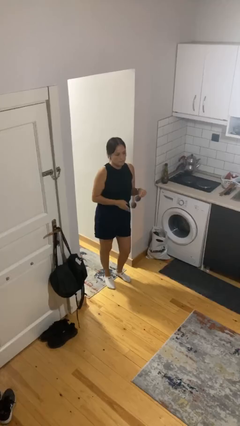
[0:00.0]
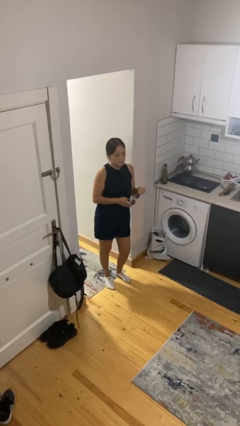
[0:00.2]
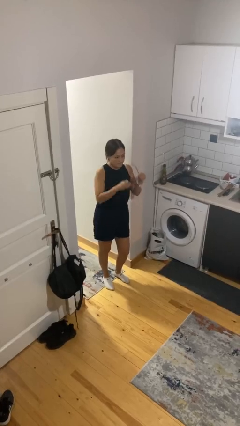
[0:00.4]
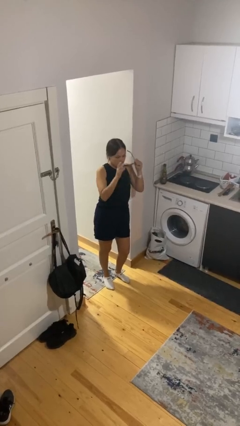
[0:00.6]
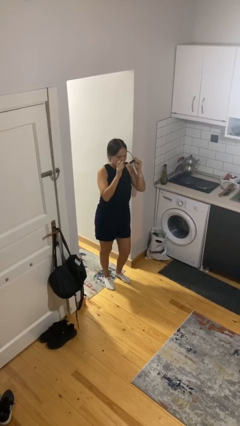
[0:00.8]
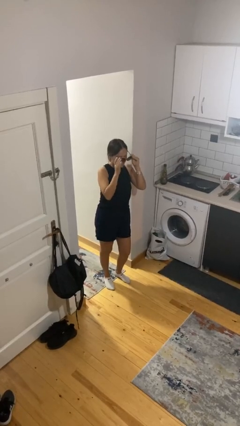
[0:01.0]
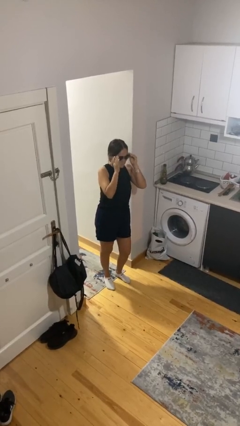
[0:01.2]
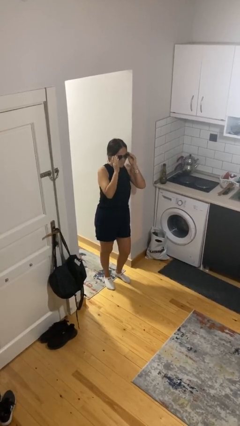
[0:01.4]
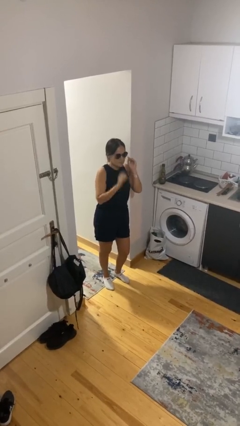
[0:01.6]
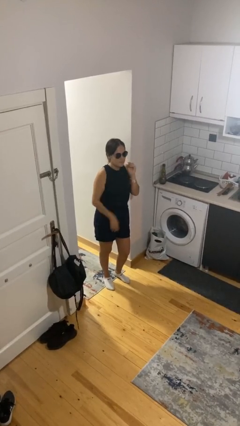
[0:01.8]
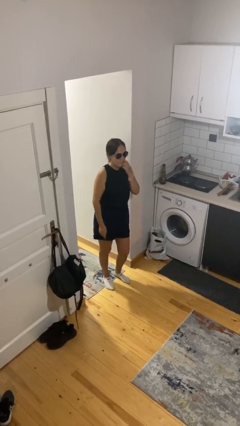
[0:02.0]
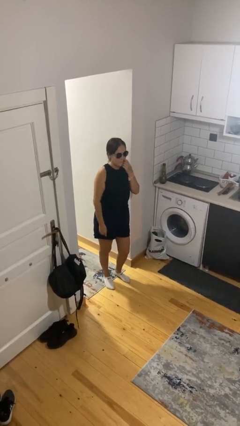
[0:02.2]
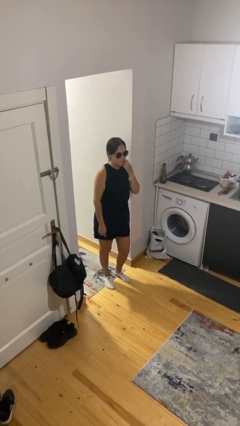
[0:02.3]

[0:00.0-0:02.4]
person puts on sunglasses

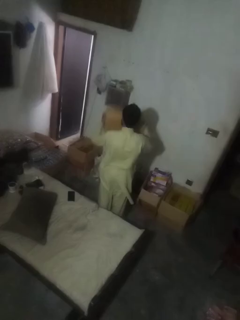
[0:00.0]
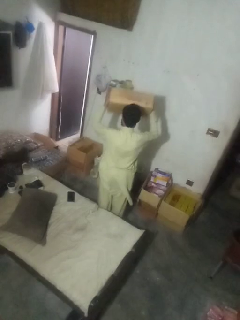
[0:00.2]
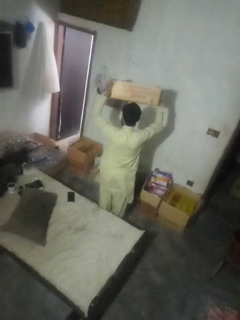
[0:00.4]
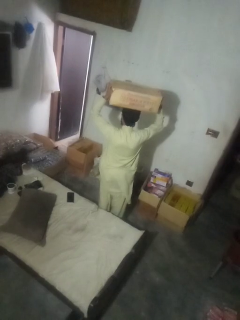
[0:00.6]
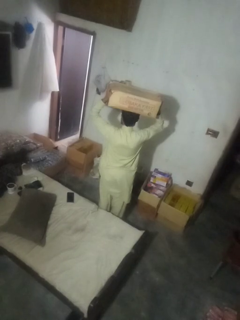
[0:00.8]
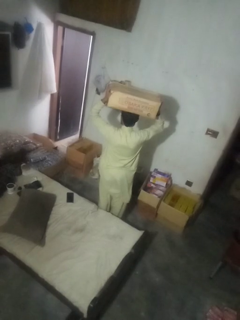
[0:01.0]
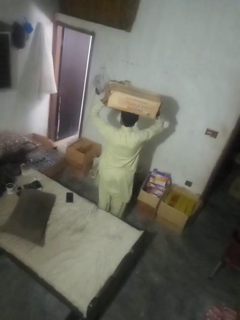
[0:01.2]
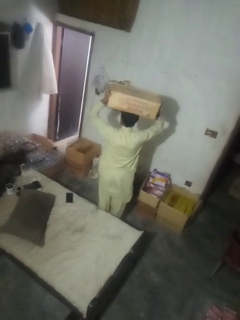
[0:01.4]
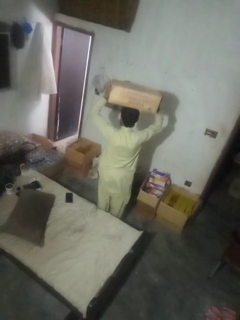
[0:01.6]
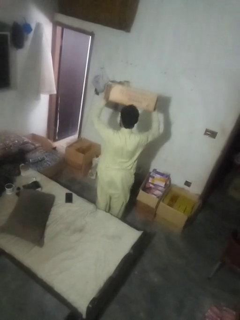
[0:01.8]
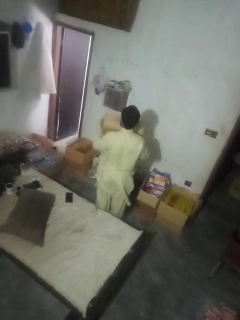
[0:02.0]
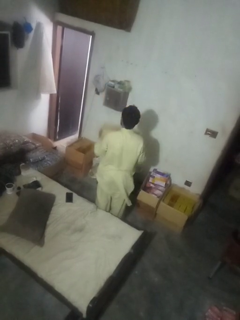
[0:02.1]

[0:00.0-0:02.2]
person holds object above head

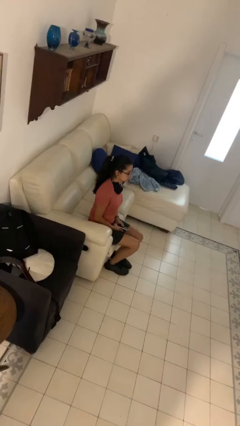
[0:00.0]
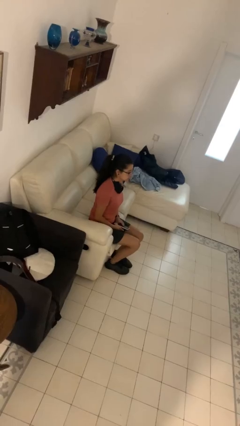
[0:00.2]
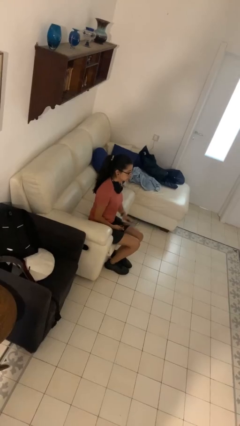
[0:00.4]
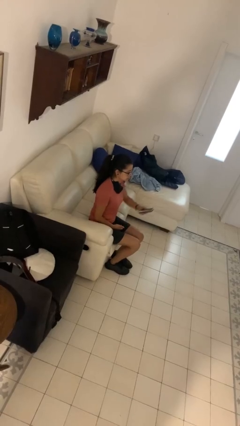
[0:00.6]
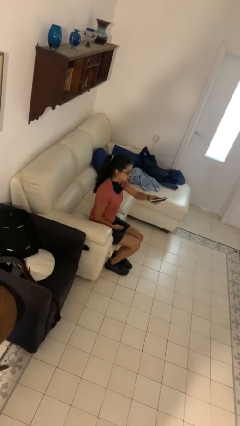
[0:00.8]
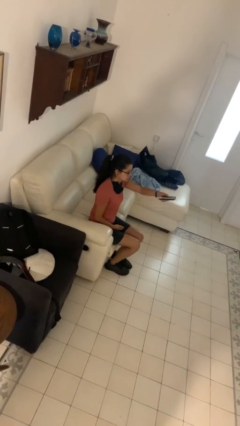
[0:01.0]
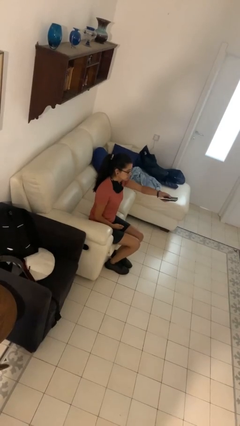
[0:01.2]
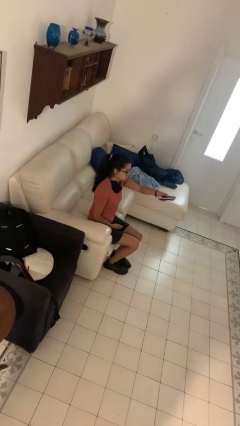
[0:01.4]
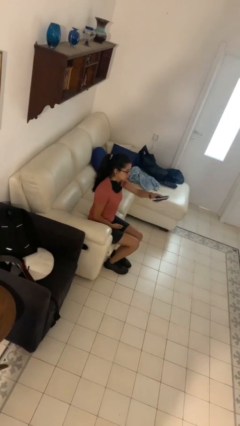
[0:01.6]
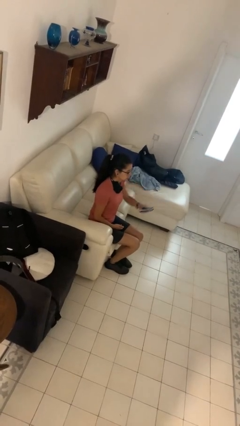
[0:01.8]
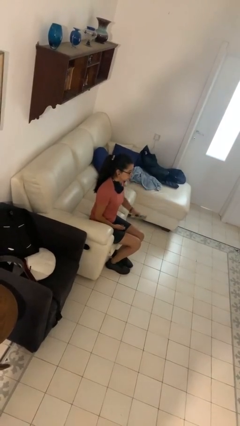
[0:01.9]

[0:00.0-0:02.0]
person uses television remote

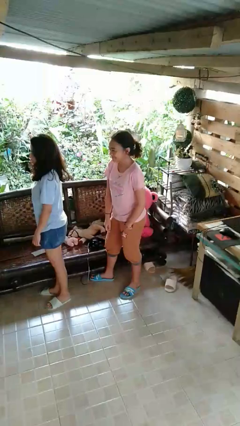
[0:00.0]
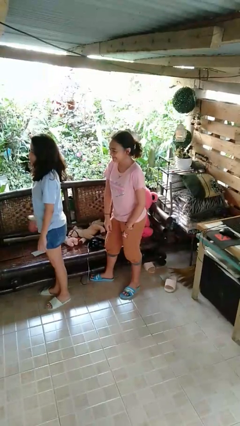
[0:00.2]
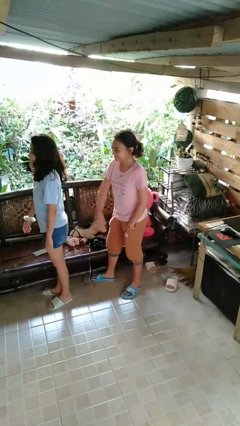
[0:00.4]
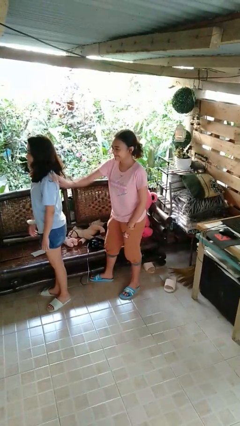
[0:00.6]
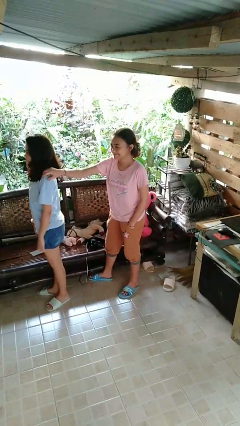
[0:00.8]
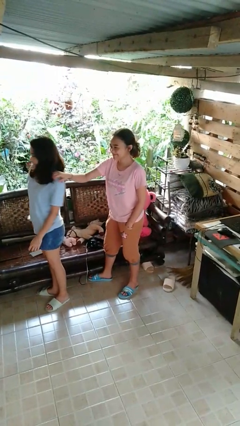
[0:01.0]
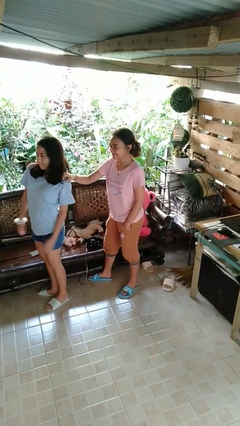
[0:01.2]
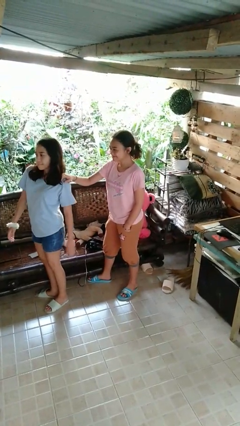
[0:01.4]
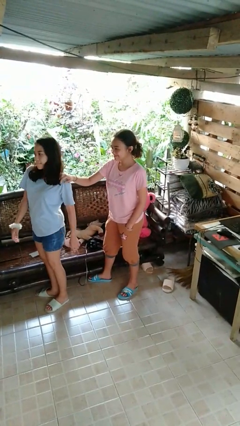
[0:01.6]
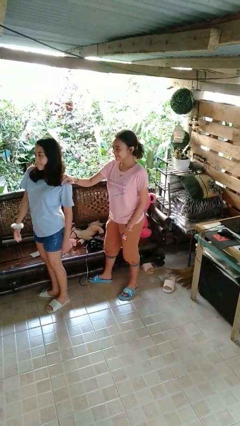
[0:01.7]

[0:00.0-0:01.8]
person grabs person by shoulder

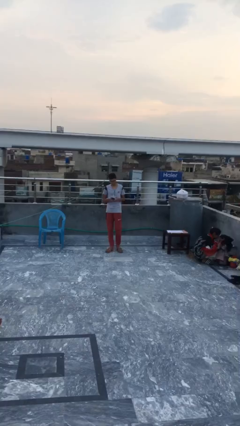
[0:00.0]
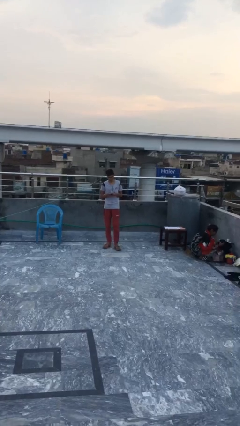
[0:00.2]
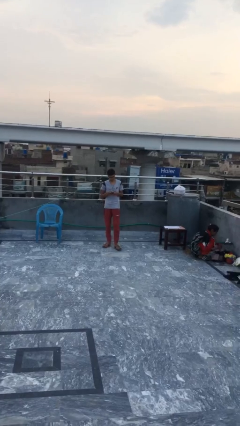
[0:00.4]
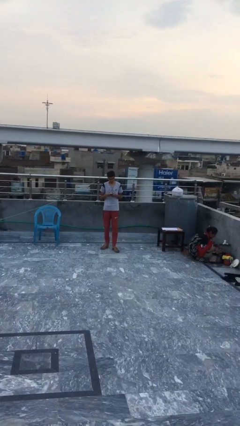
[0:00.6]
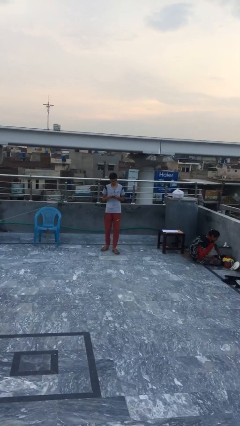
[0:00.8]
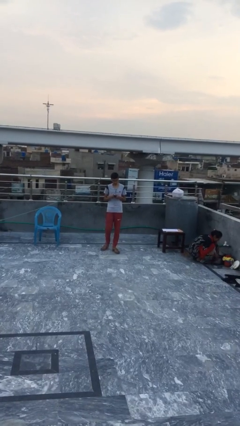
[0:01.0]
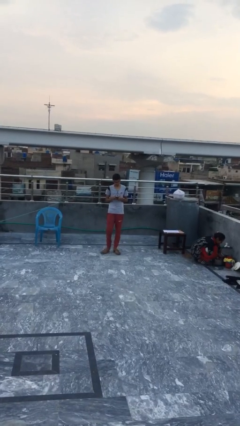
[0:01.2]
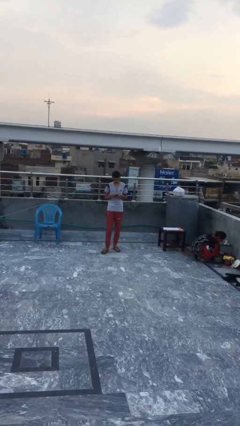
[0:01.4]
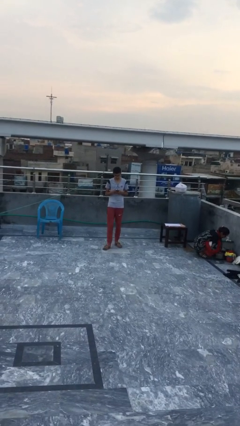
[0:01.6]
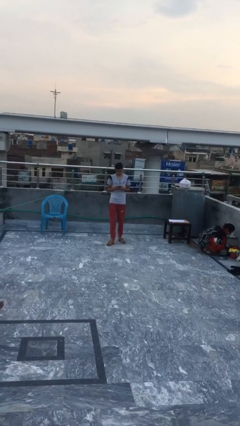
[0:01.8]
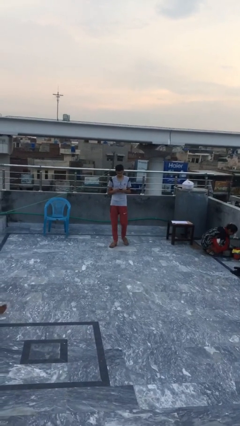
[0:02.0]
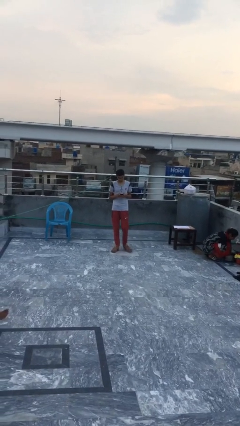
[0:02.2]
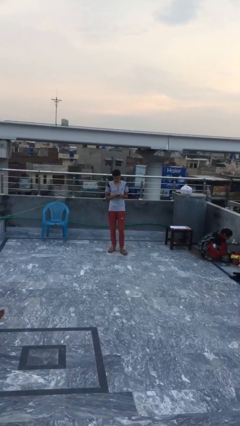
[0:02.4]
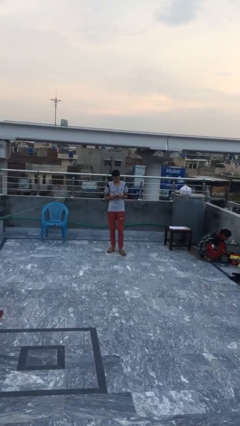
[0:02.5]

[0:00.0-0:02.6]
person texts on phone

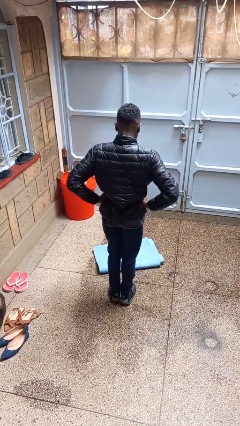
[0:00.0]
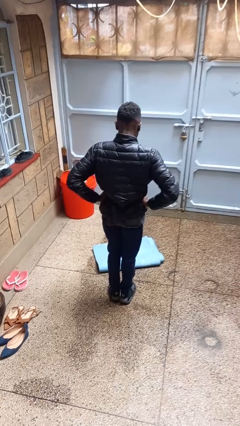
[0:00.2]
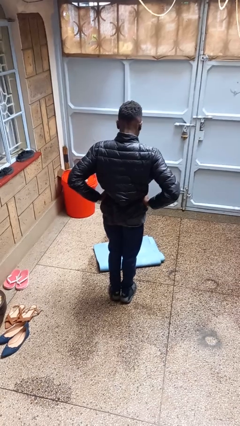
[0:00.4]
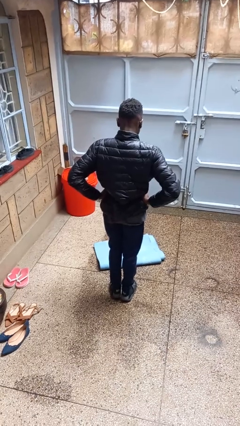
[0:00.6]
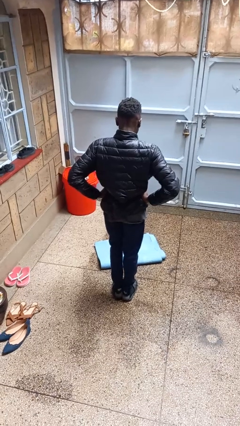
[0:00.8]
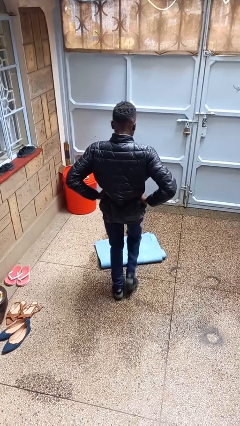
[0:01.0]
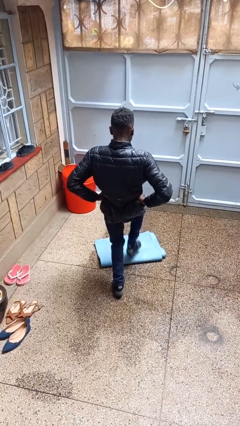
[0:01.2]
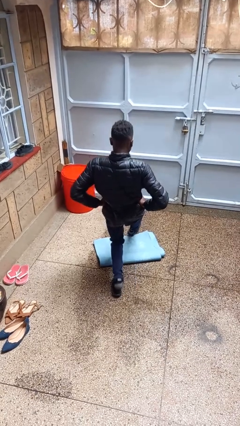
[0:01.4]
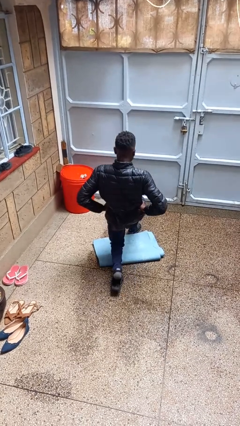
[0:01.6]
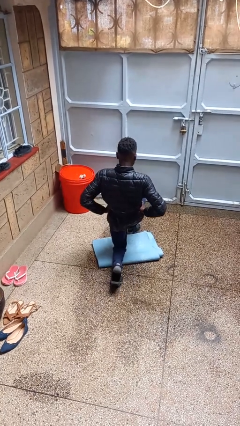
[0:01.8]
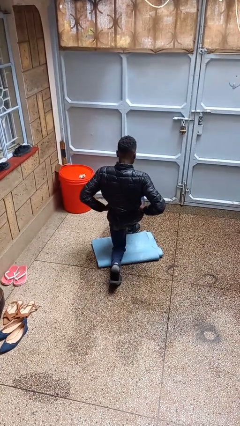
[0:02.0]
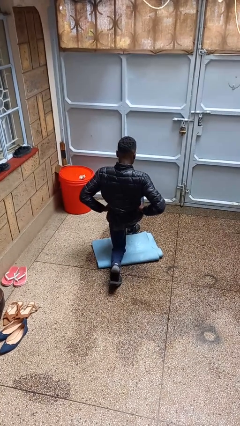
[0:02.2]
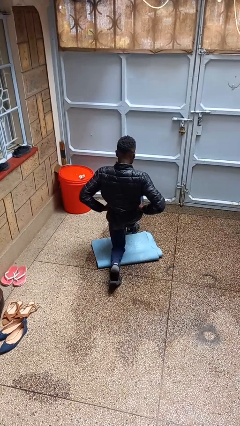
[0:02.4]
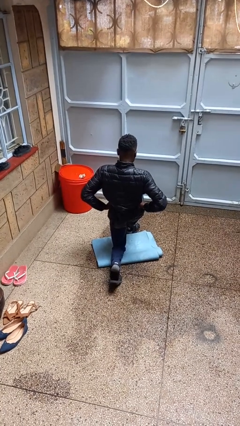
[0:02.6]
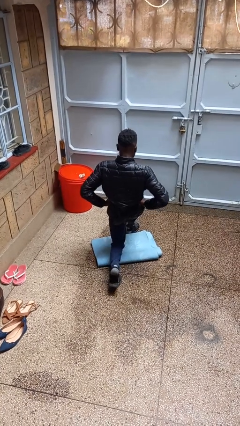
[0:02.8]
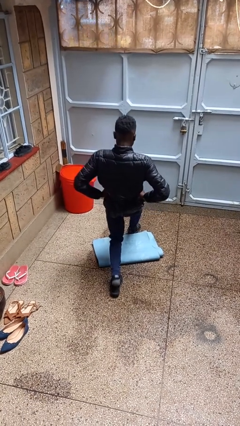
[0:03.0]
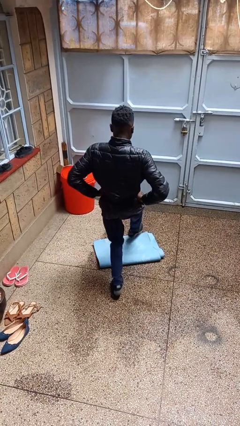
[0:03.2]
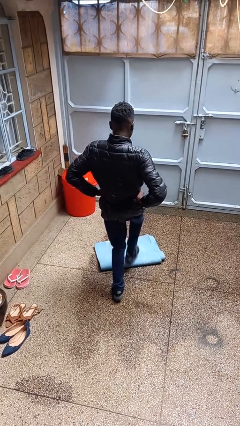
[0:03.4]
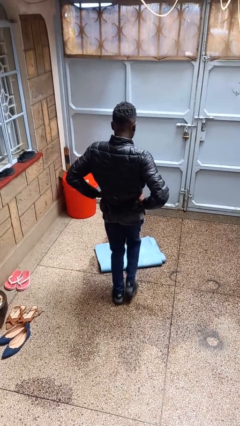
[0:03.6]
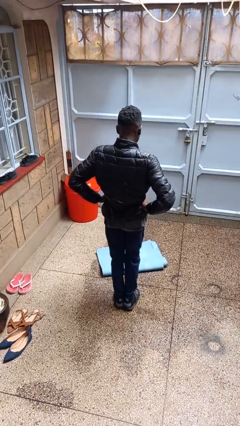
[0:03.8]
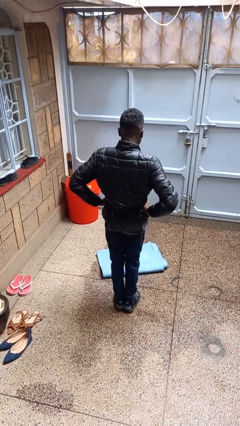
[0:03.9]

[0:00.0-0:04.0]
person exercises with lunges

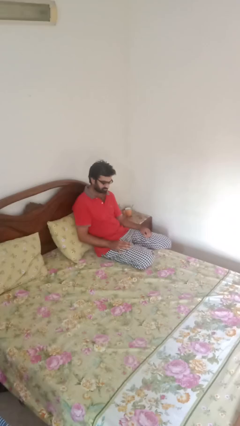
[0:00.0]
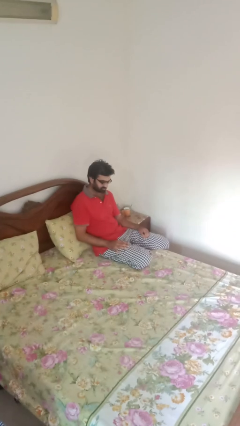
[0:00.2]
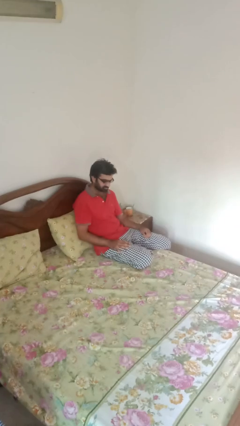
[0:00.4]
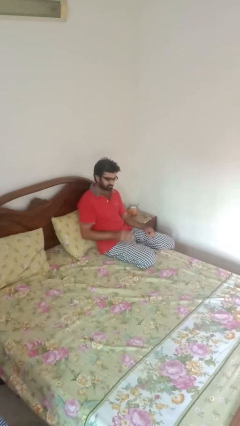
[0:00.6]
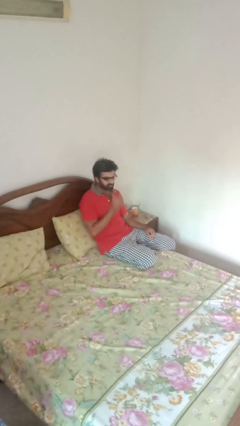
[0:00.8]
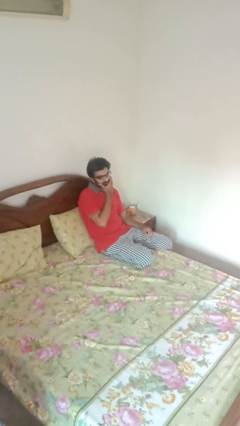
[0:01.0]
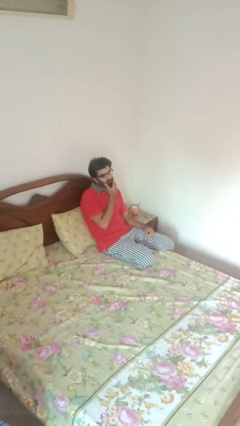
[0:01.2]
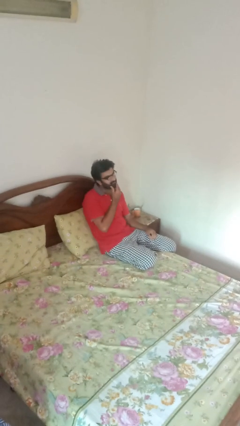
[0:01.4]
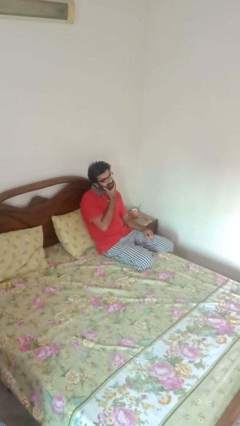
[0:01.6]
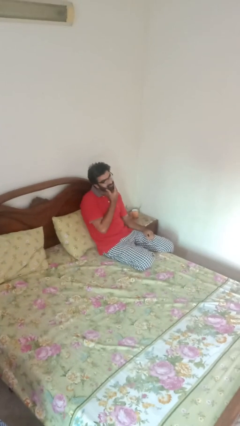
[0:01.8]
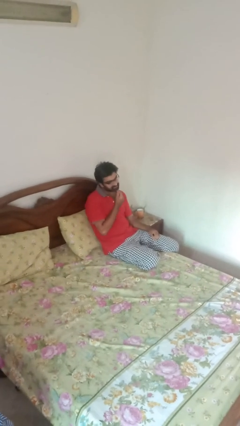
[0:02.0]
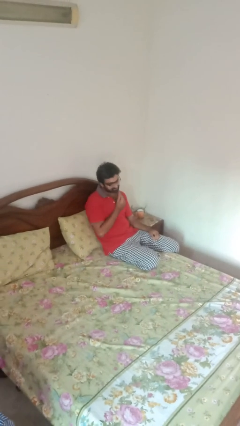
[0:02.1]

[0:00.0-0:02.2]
person strokes chin

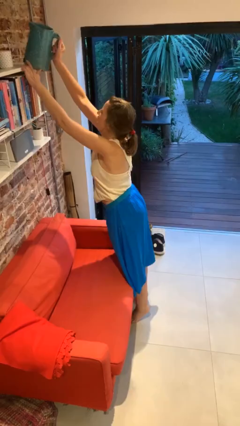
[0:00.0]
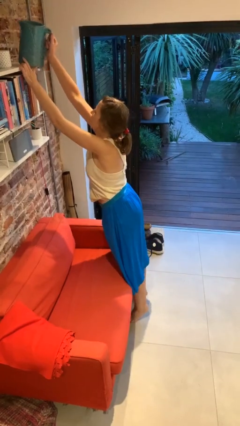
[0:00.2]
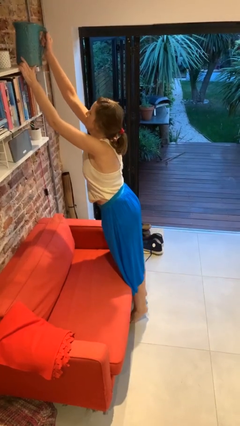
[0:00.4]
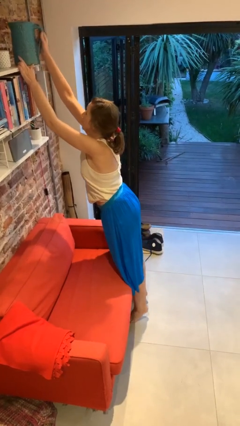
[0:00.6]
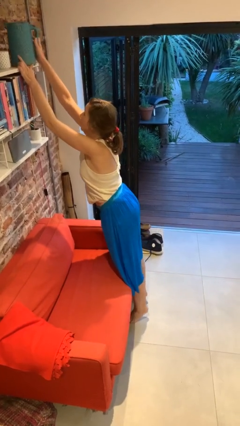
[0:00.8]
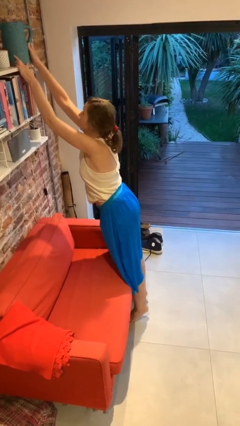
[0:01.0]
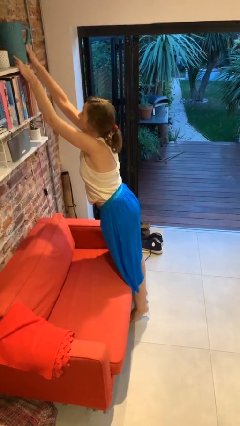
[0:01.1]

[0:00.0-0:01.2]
person puts down object on shelf
